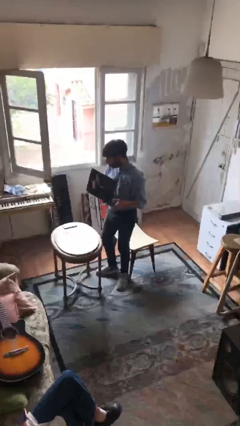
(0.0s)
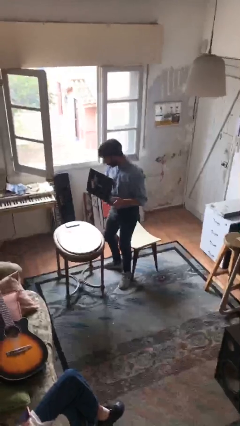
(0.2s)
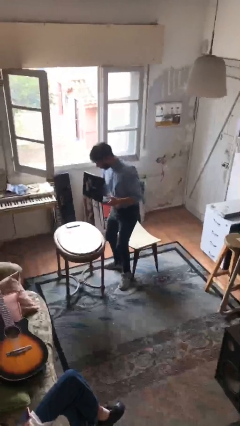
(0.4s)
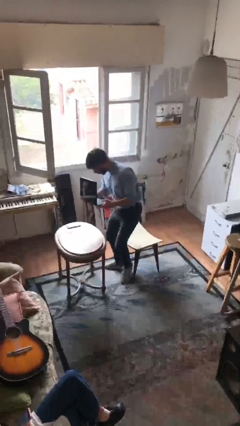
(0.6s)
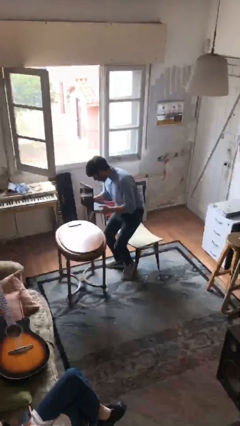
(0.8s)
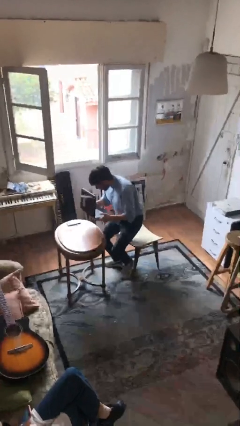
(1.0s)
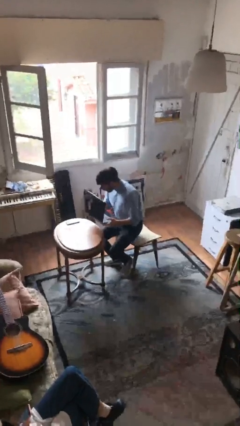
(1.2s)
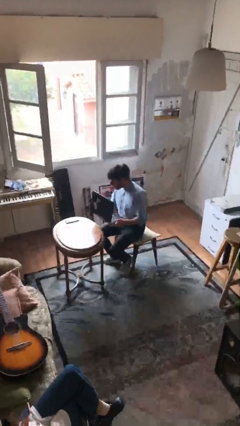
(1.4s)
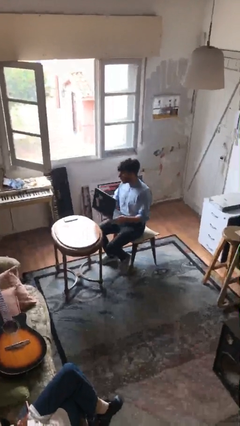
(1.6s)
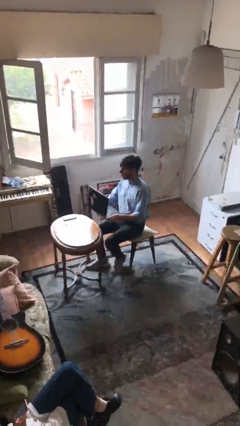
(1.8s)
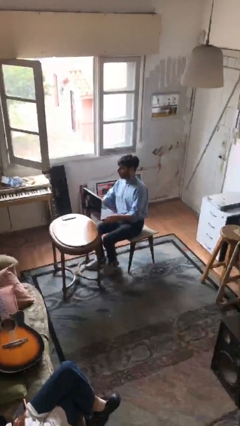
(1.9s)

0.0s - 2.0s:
person sits down

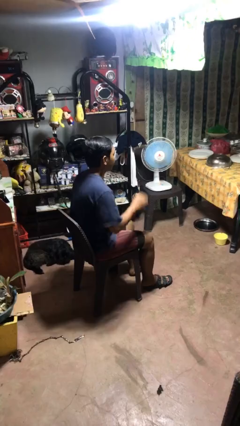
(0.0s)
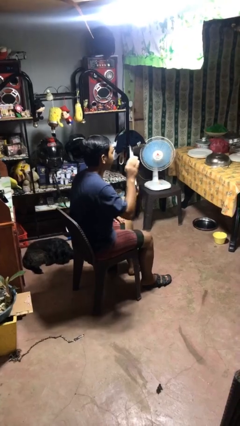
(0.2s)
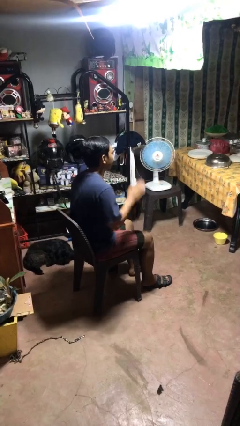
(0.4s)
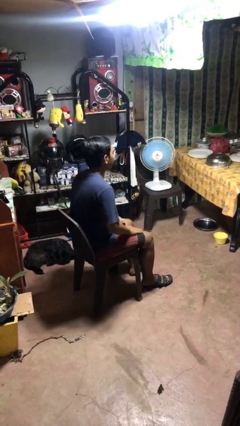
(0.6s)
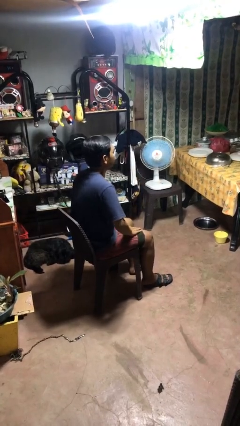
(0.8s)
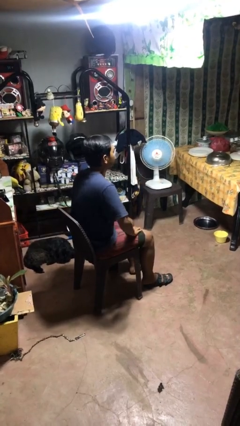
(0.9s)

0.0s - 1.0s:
person slaps hands on thighs

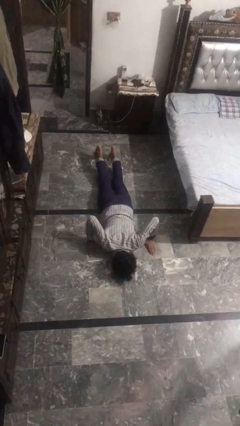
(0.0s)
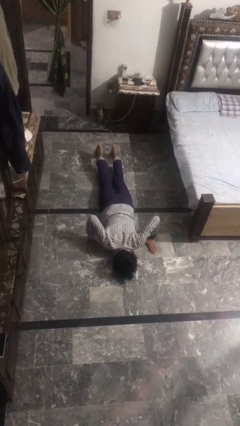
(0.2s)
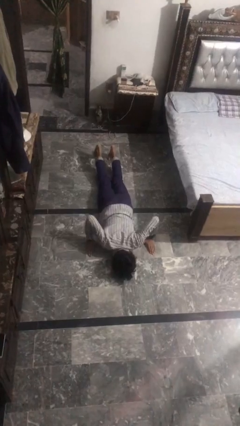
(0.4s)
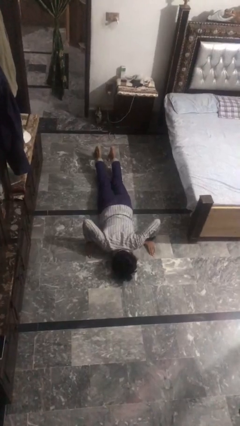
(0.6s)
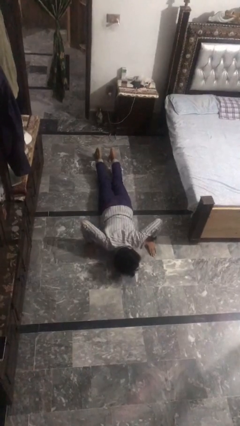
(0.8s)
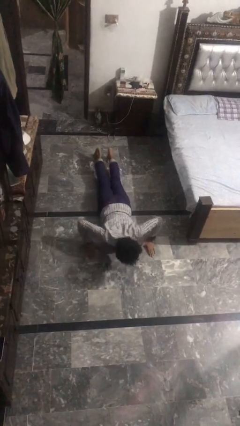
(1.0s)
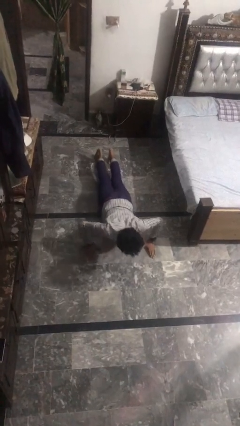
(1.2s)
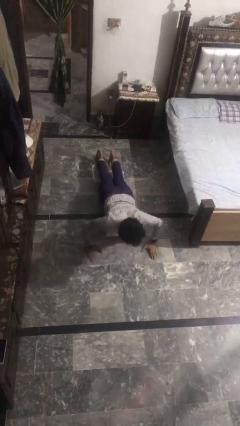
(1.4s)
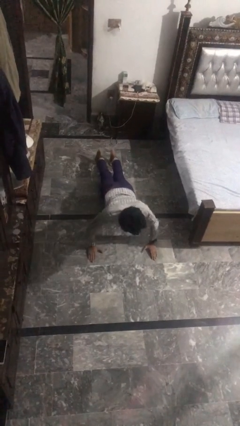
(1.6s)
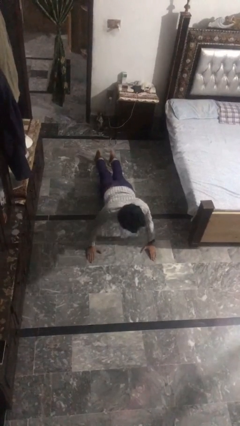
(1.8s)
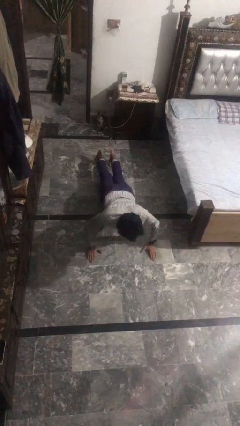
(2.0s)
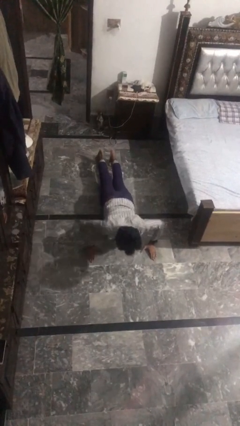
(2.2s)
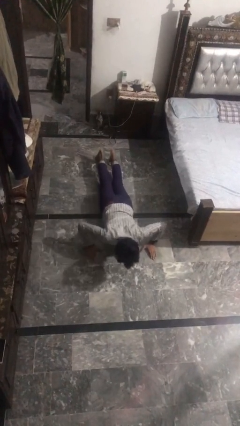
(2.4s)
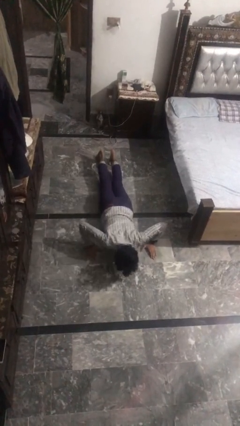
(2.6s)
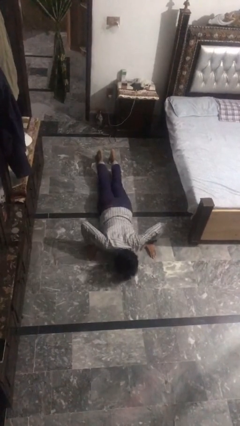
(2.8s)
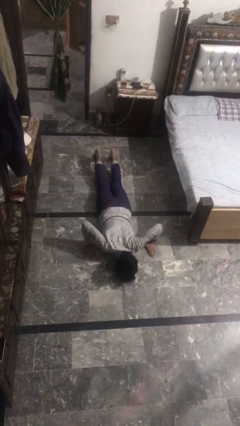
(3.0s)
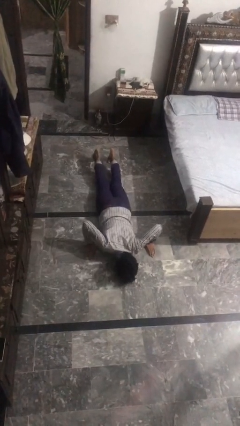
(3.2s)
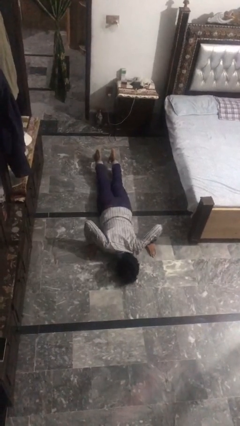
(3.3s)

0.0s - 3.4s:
person exercises with pushup

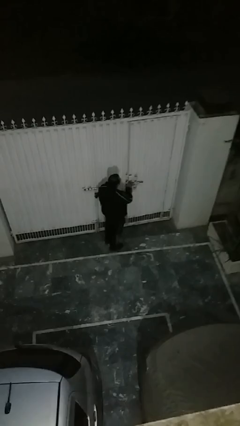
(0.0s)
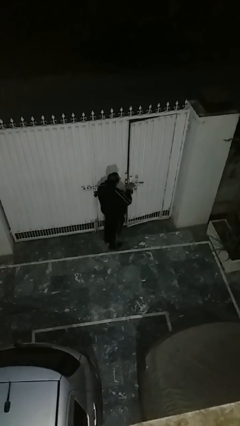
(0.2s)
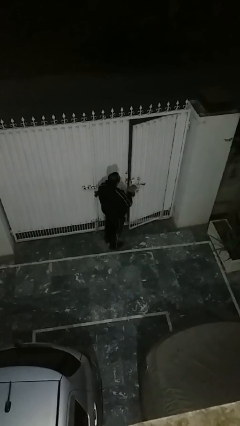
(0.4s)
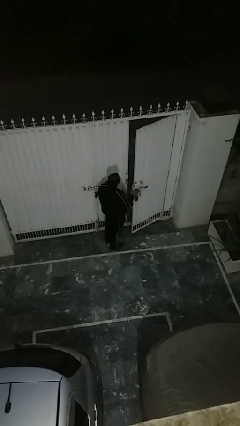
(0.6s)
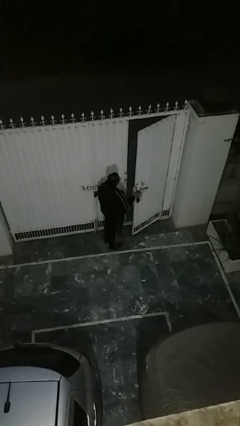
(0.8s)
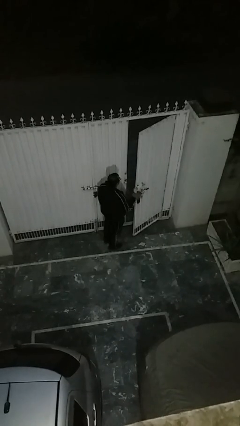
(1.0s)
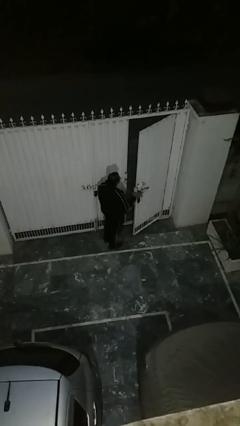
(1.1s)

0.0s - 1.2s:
person opens facility door

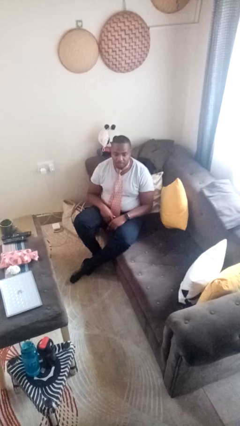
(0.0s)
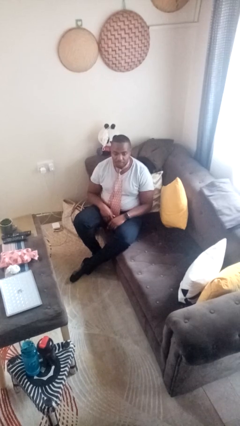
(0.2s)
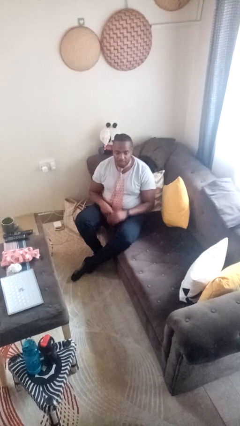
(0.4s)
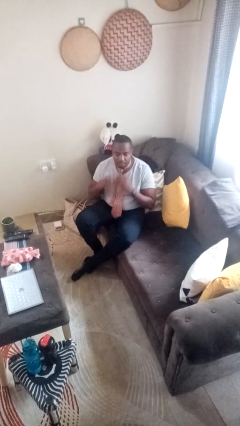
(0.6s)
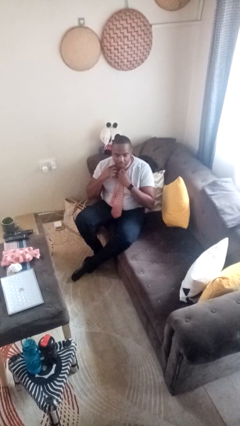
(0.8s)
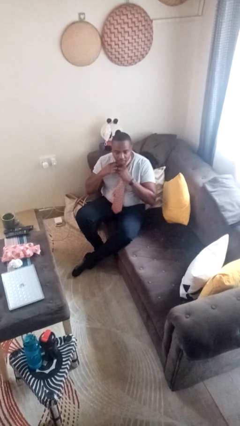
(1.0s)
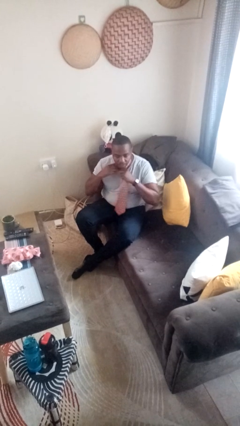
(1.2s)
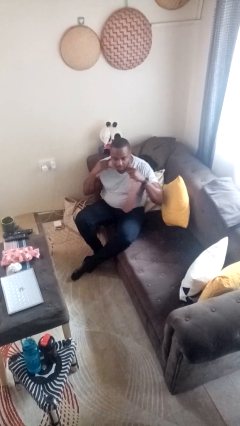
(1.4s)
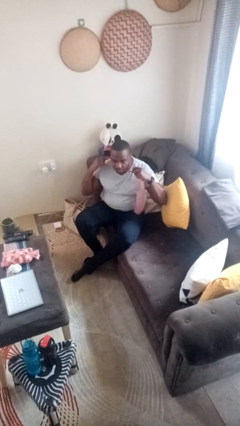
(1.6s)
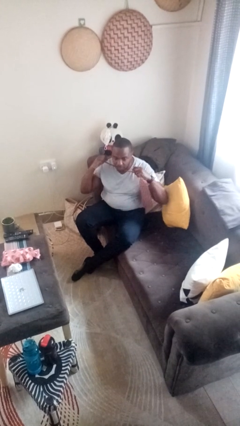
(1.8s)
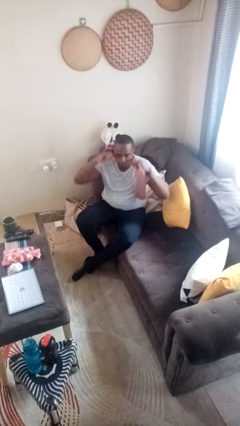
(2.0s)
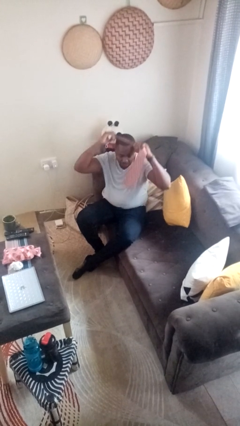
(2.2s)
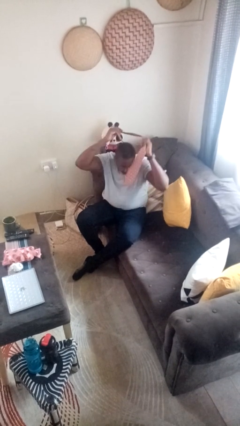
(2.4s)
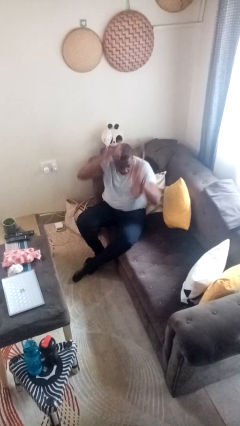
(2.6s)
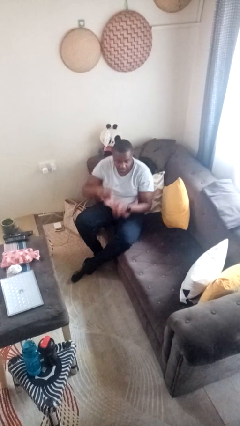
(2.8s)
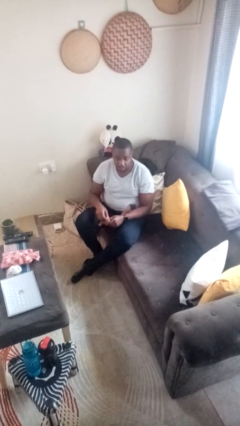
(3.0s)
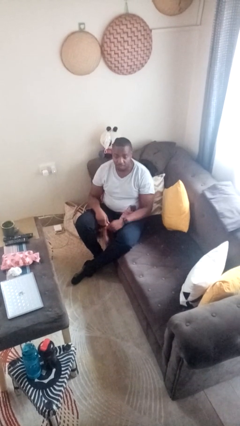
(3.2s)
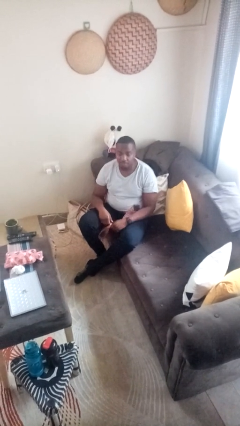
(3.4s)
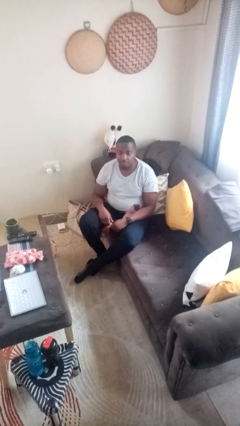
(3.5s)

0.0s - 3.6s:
person takes off necktie

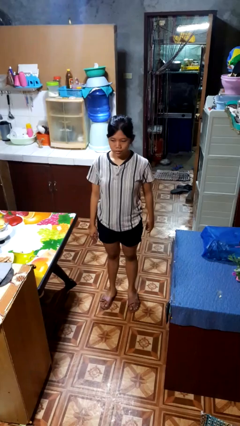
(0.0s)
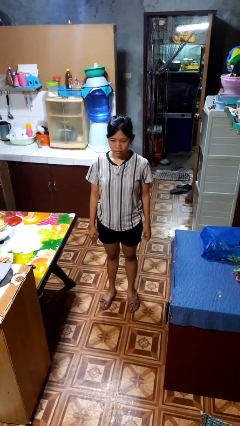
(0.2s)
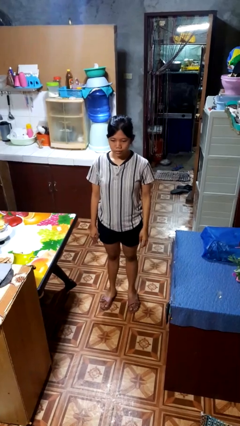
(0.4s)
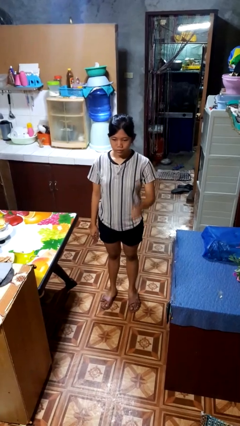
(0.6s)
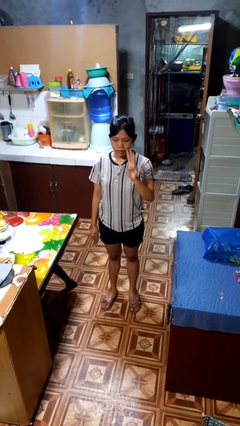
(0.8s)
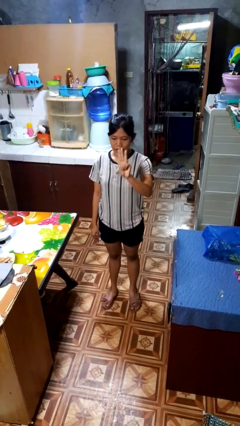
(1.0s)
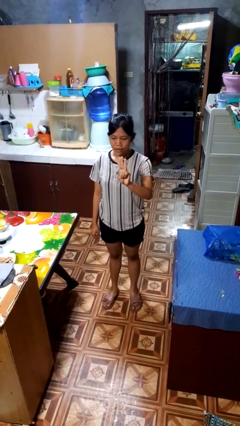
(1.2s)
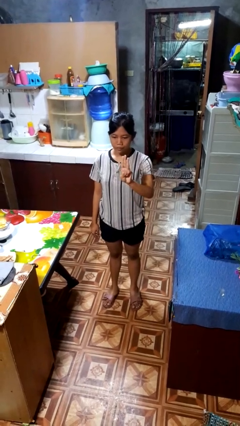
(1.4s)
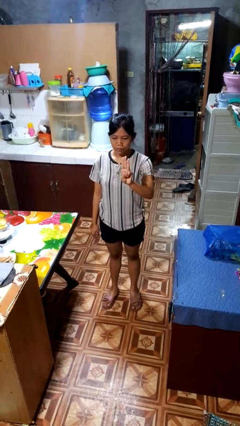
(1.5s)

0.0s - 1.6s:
person gestures number three

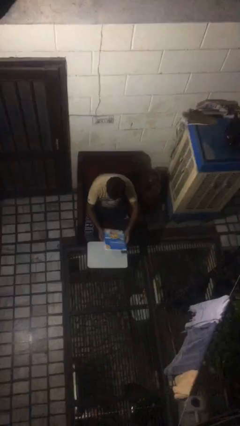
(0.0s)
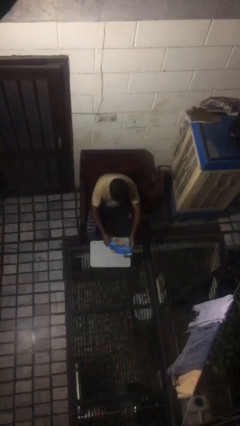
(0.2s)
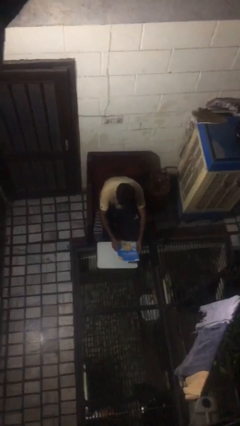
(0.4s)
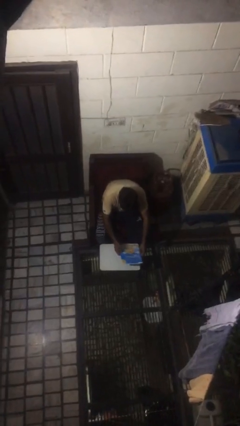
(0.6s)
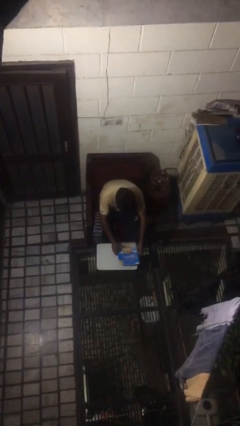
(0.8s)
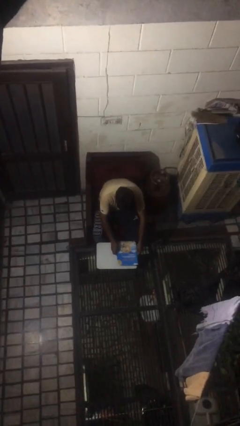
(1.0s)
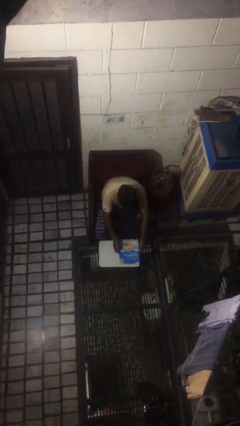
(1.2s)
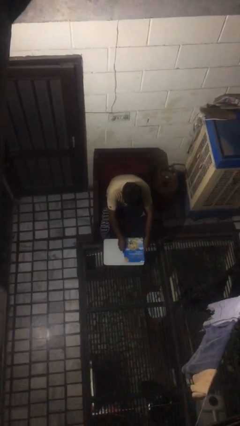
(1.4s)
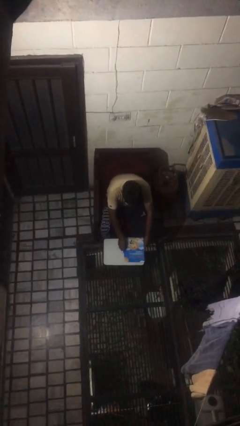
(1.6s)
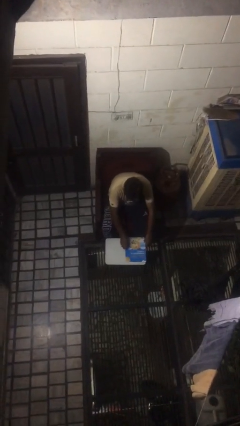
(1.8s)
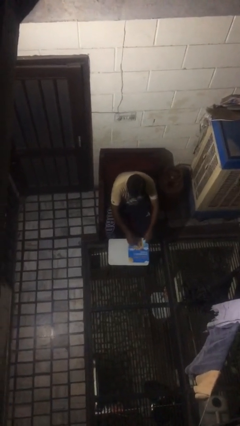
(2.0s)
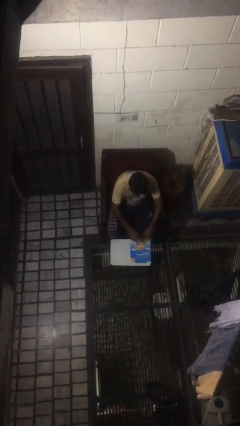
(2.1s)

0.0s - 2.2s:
person puts down object on table

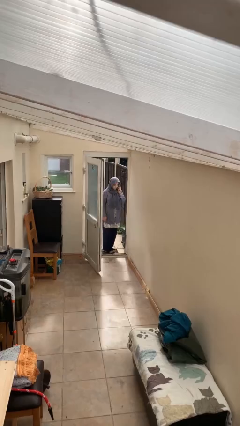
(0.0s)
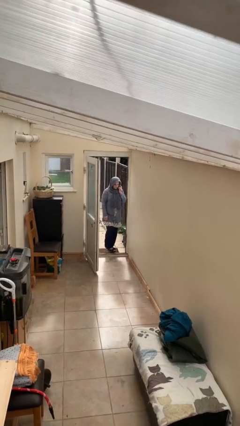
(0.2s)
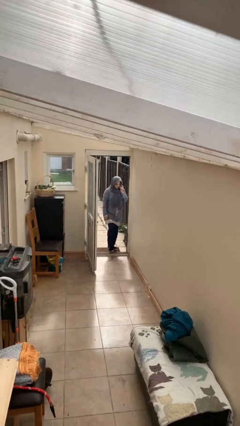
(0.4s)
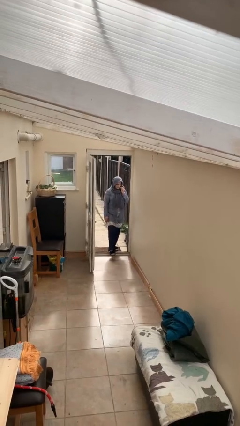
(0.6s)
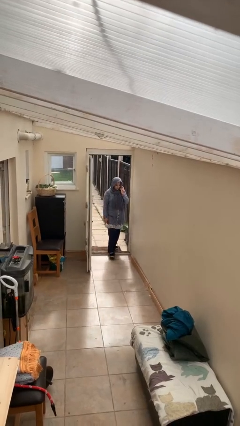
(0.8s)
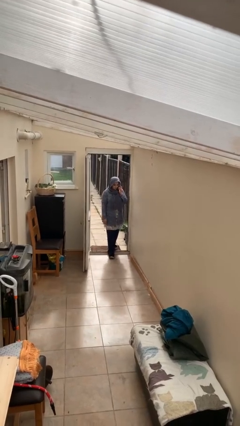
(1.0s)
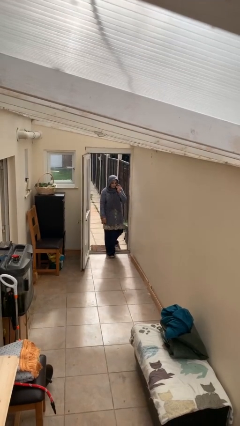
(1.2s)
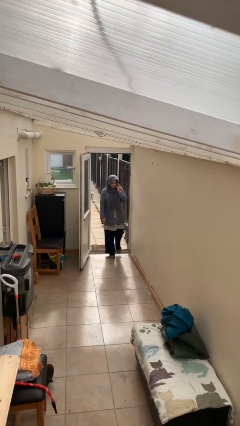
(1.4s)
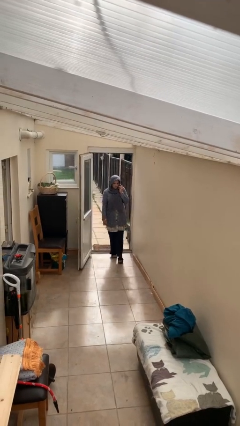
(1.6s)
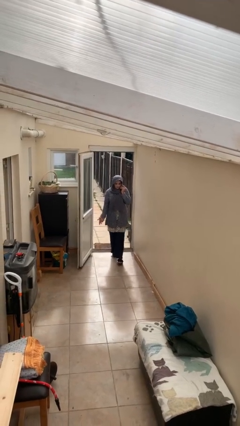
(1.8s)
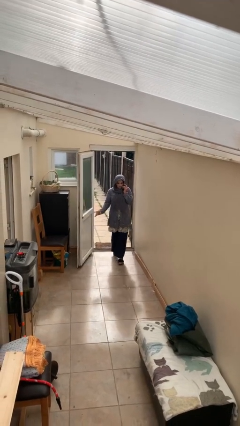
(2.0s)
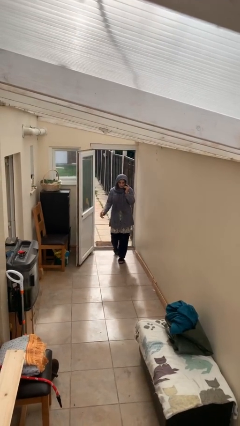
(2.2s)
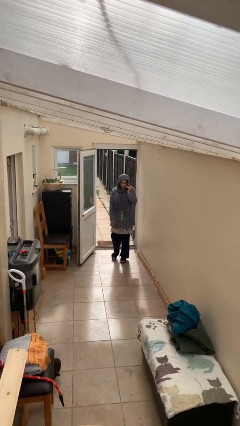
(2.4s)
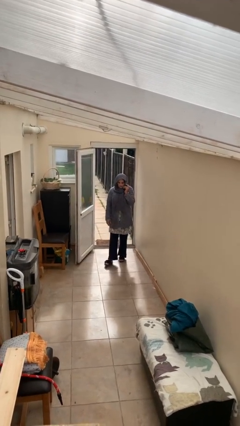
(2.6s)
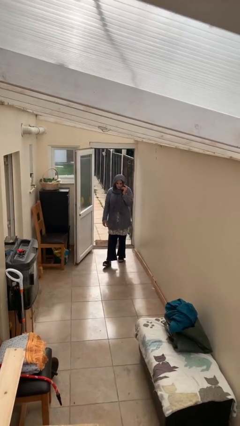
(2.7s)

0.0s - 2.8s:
person enters scene through structure
